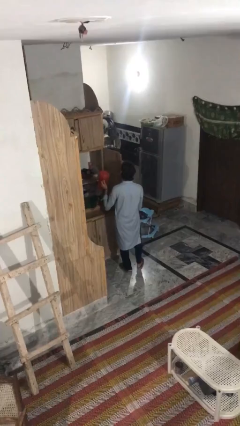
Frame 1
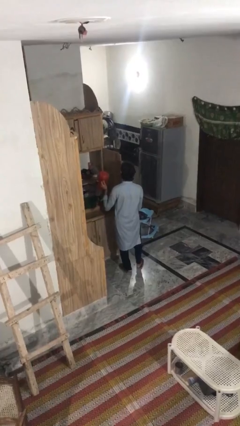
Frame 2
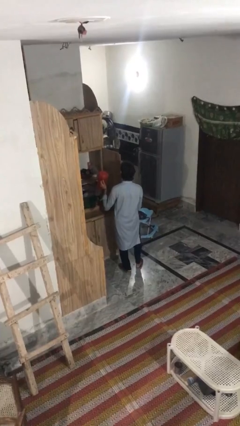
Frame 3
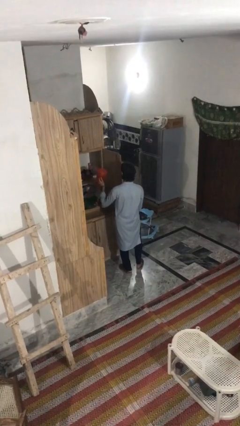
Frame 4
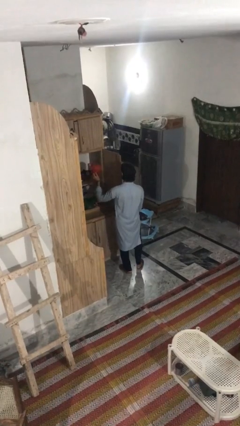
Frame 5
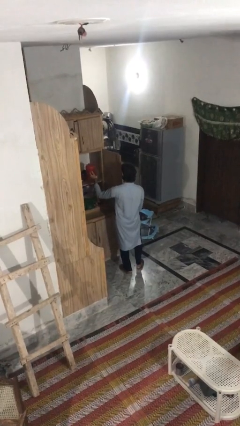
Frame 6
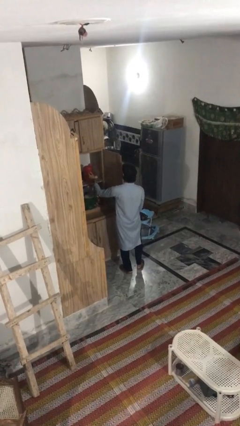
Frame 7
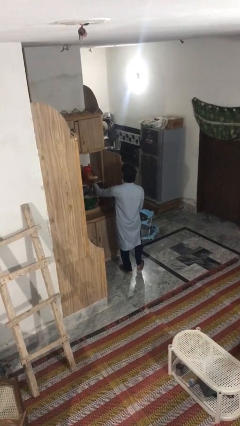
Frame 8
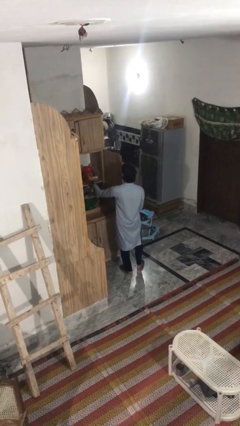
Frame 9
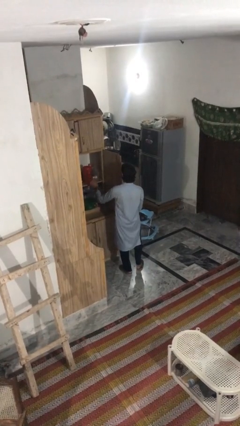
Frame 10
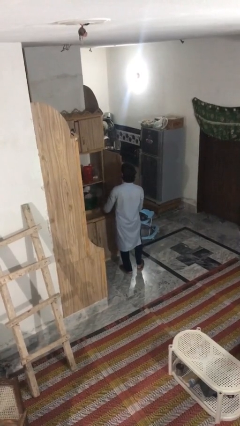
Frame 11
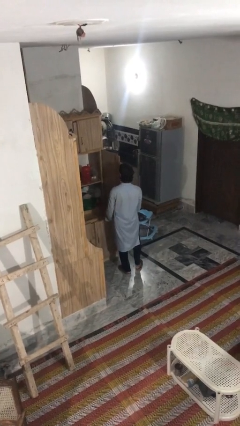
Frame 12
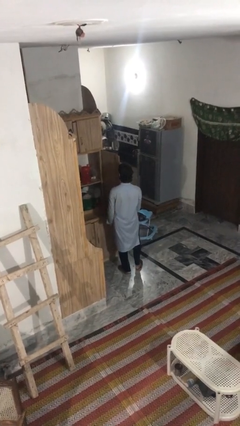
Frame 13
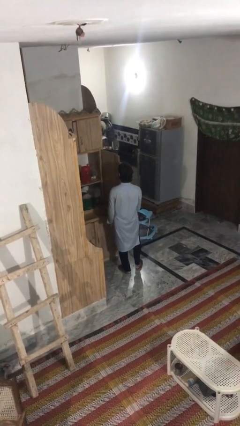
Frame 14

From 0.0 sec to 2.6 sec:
person puts down object into cabinet

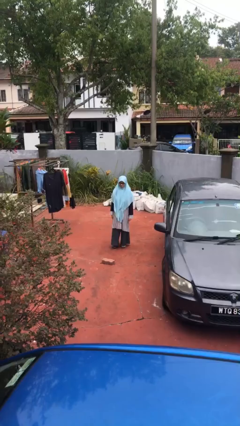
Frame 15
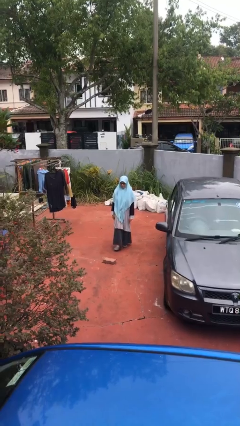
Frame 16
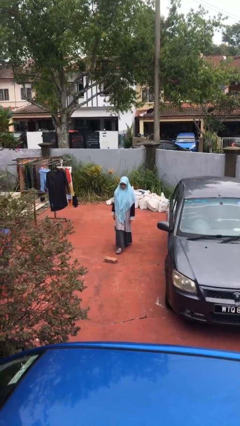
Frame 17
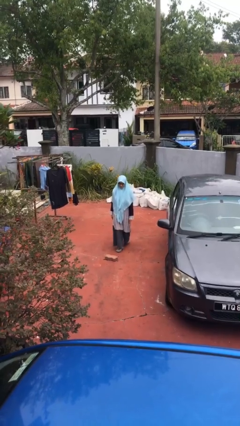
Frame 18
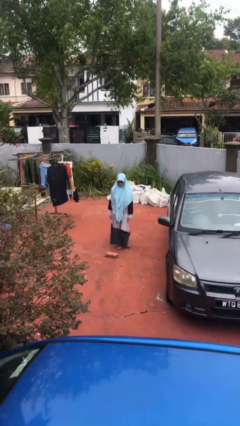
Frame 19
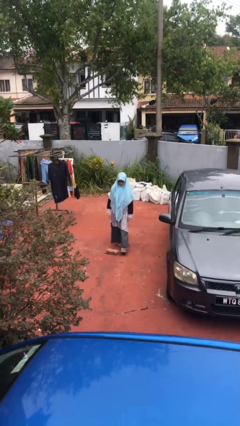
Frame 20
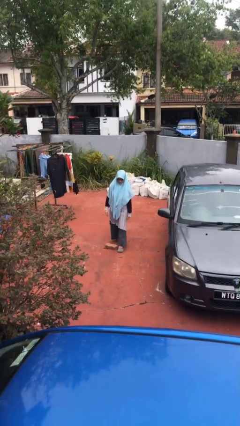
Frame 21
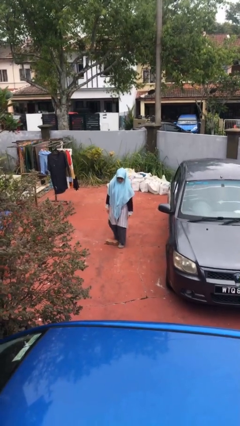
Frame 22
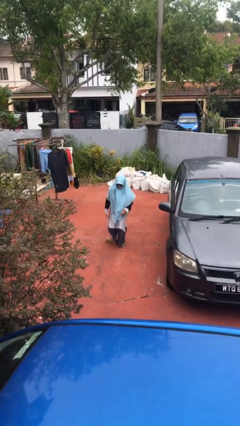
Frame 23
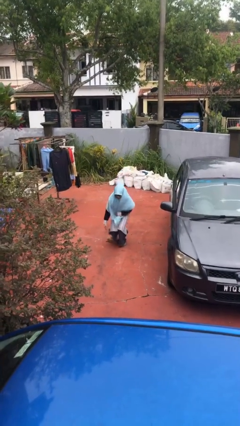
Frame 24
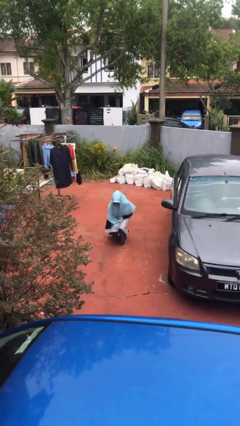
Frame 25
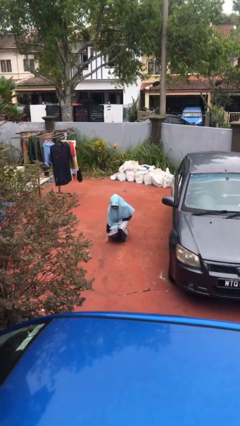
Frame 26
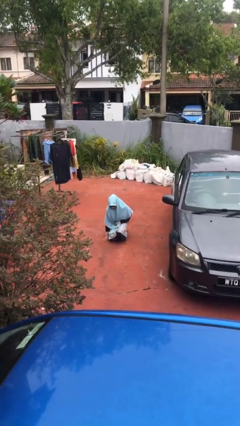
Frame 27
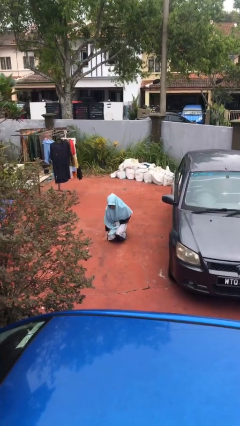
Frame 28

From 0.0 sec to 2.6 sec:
person trips on object on floor

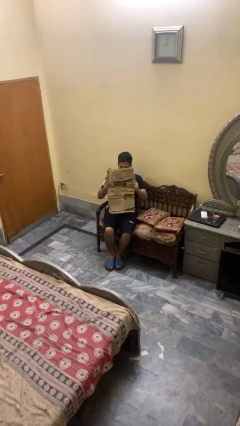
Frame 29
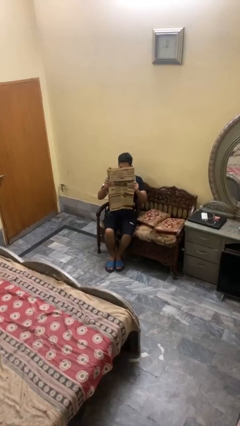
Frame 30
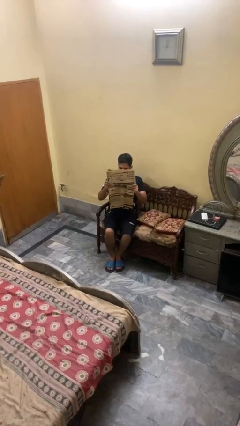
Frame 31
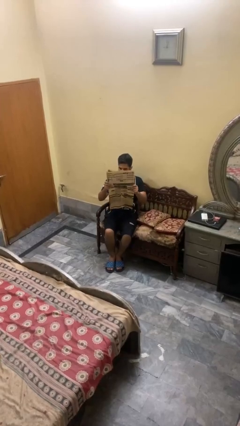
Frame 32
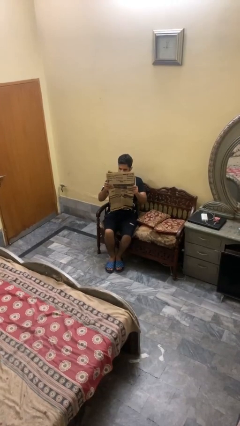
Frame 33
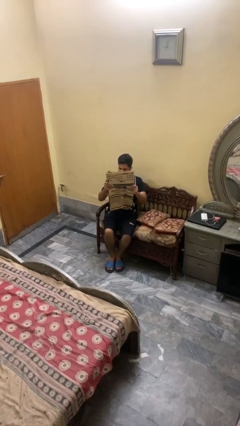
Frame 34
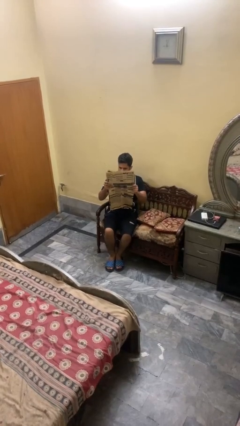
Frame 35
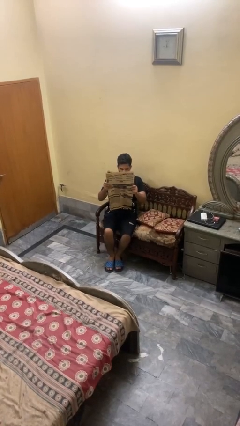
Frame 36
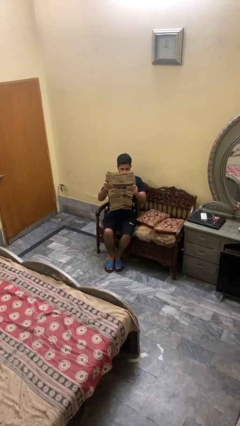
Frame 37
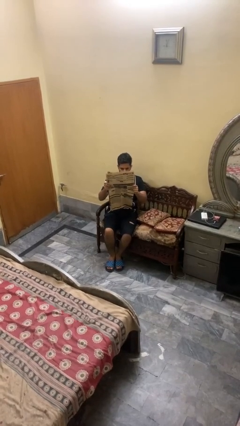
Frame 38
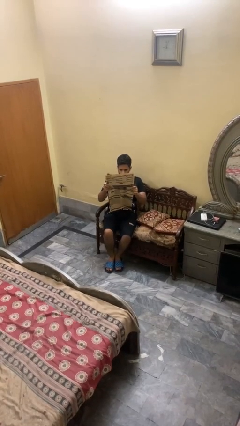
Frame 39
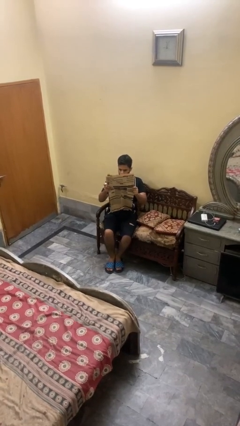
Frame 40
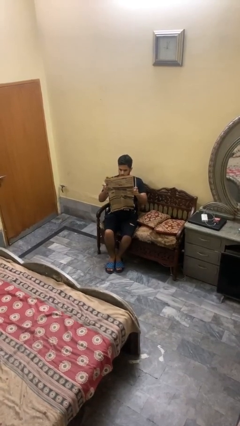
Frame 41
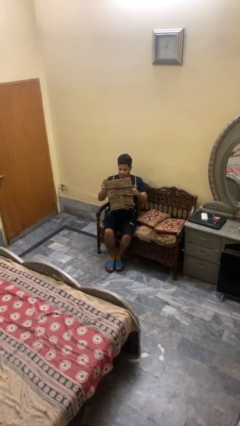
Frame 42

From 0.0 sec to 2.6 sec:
person reads newspaper

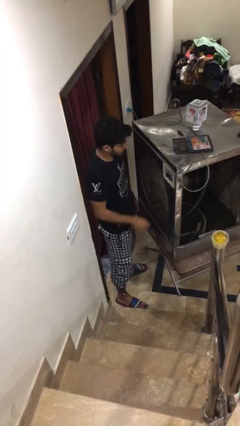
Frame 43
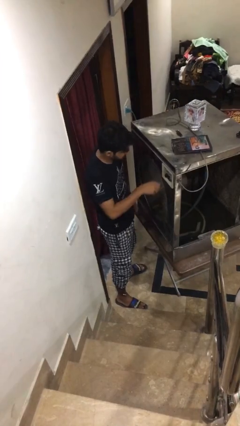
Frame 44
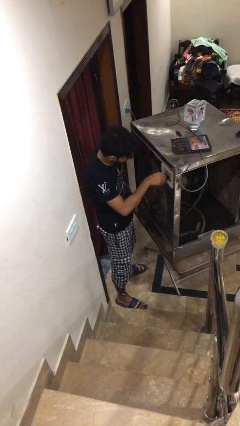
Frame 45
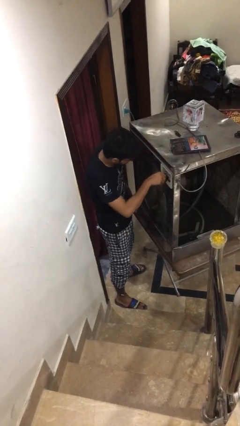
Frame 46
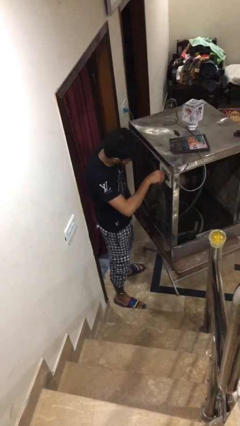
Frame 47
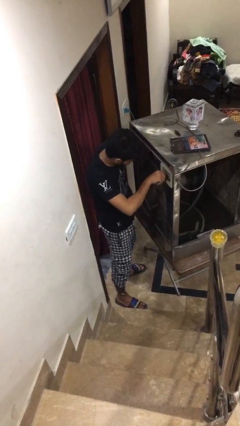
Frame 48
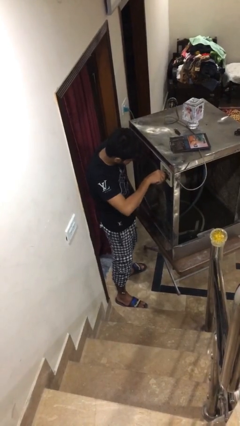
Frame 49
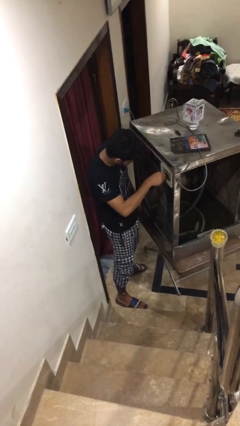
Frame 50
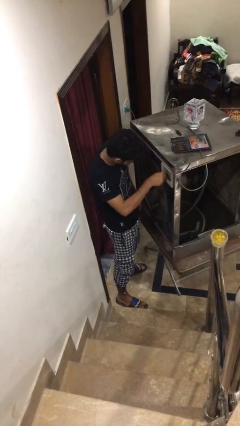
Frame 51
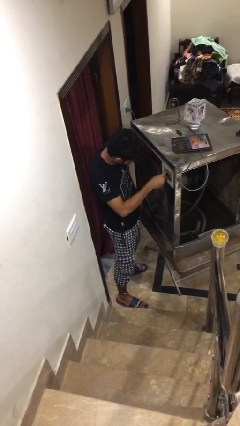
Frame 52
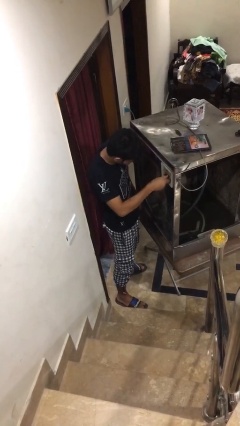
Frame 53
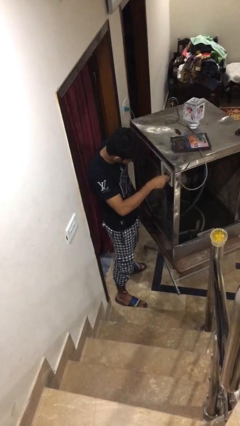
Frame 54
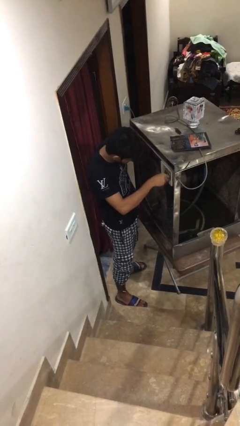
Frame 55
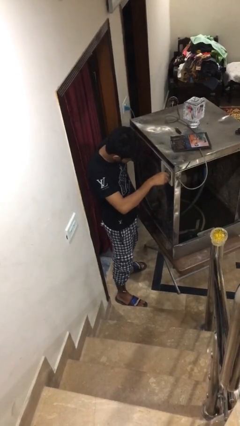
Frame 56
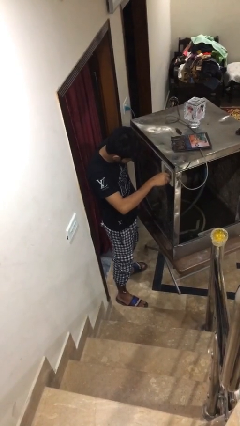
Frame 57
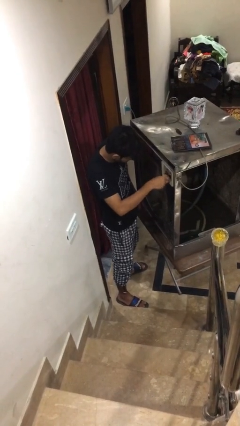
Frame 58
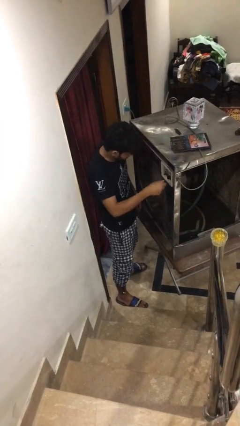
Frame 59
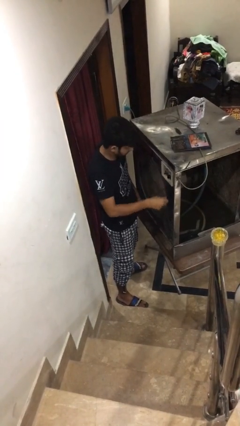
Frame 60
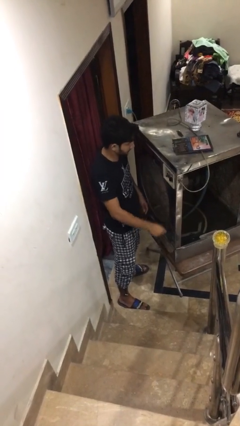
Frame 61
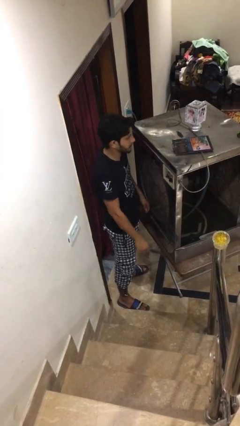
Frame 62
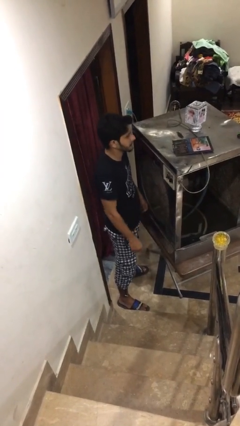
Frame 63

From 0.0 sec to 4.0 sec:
person adjusts thermostat

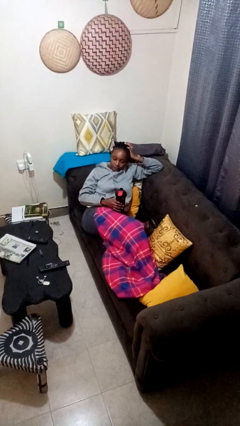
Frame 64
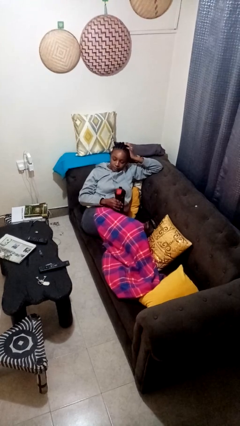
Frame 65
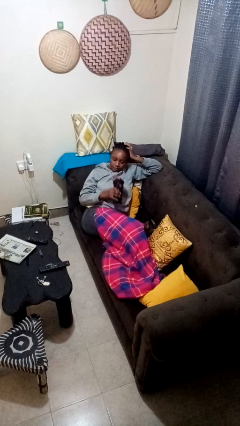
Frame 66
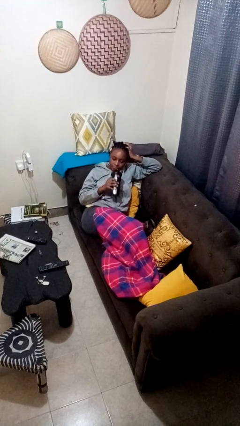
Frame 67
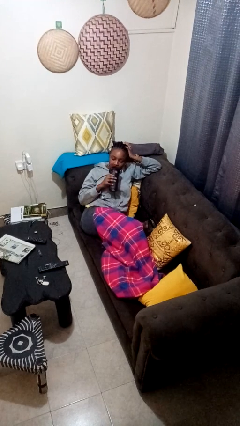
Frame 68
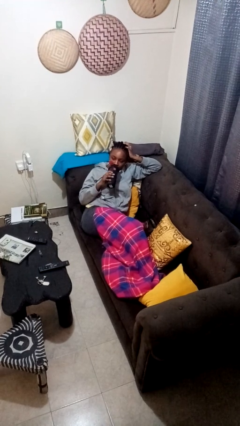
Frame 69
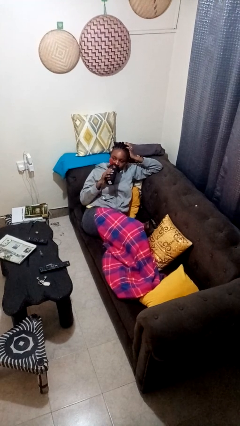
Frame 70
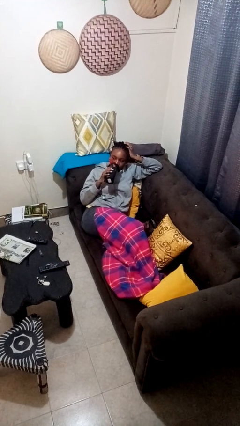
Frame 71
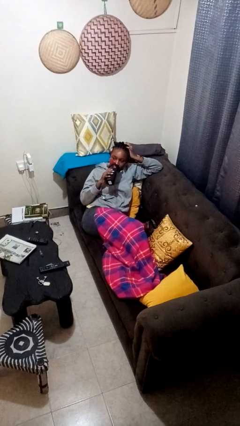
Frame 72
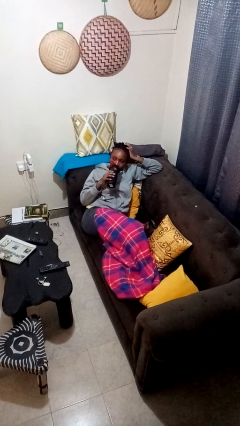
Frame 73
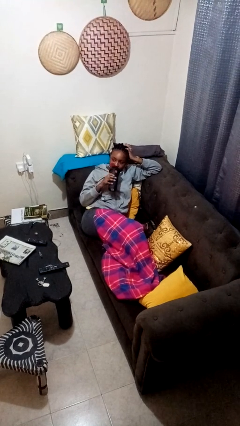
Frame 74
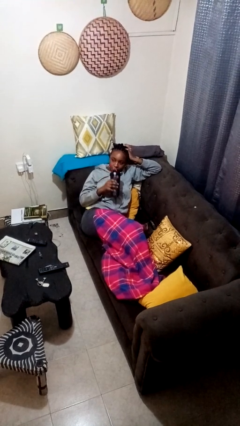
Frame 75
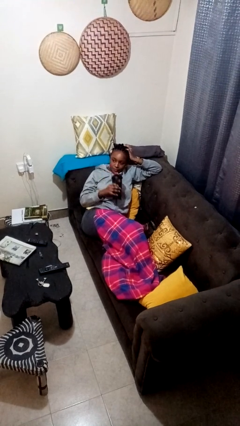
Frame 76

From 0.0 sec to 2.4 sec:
person drinks from bottle

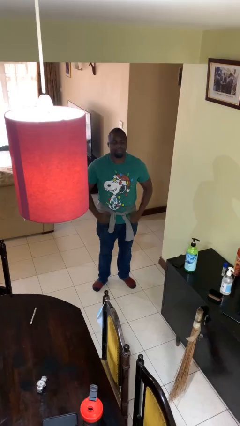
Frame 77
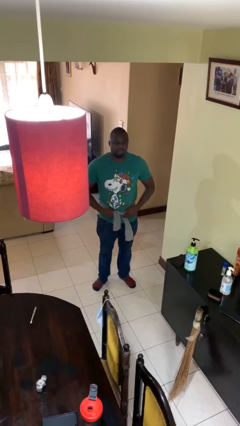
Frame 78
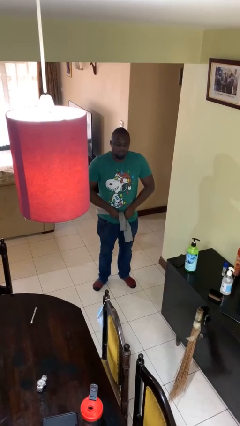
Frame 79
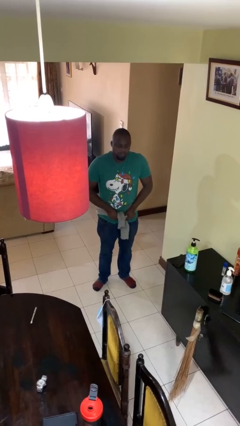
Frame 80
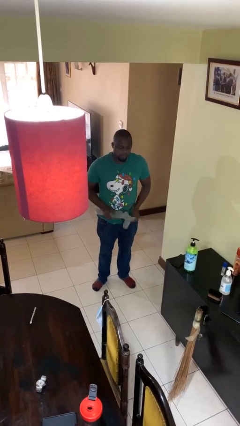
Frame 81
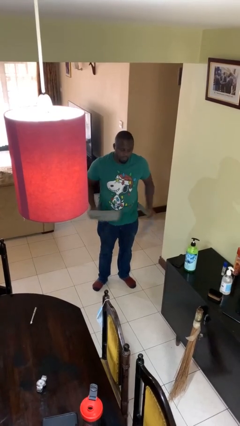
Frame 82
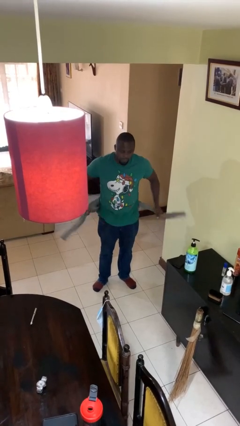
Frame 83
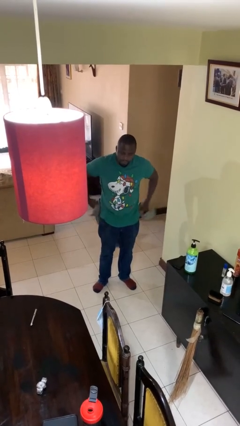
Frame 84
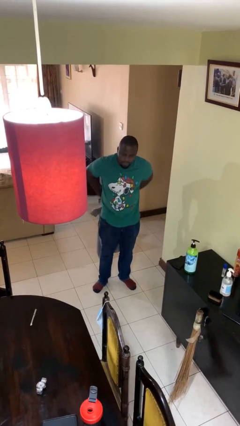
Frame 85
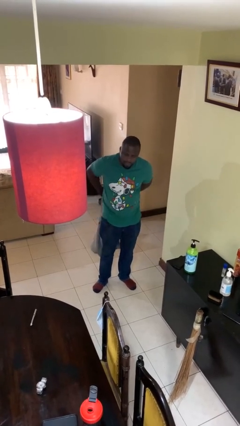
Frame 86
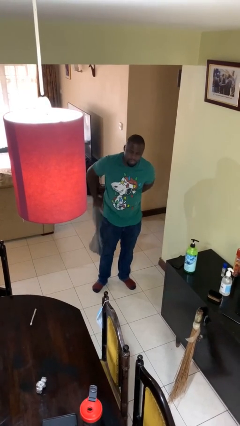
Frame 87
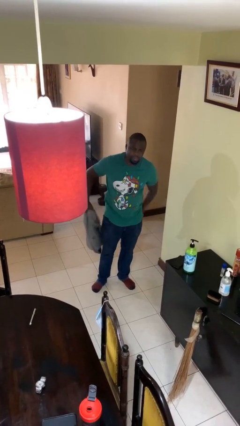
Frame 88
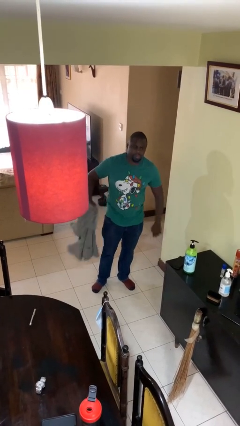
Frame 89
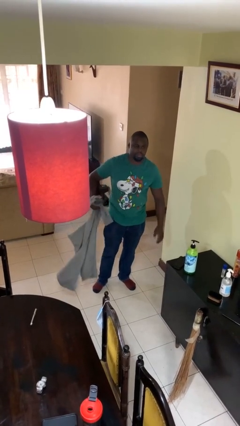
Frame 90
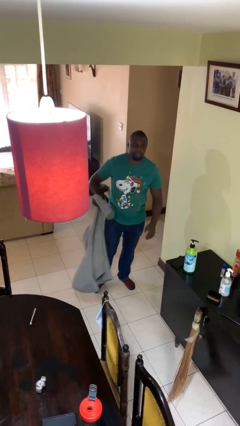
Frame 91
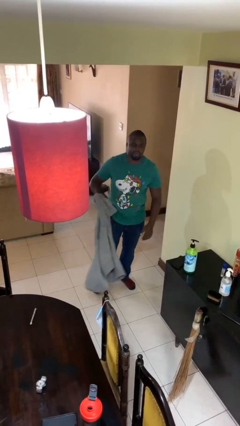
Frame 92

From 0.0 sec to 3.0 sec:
person unties jacket around waist

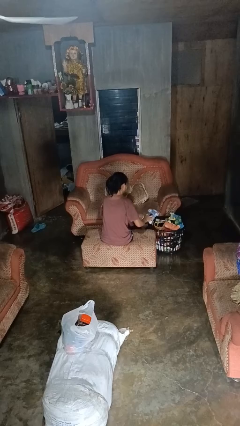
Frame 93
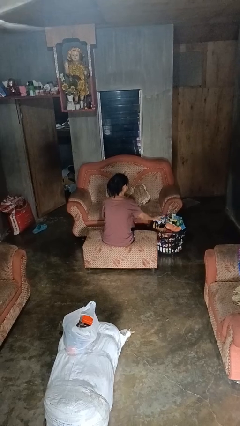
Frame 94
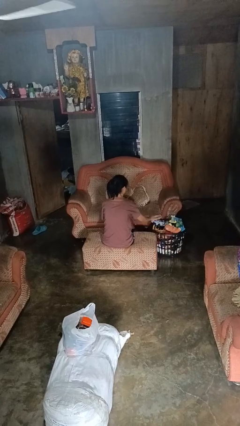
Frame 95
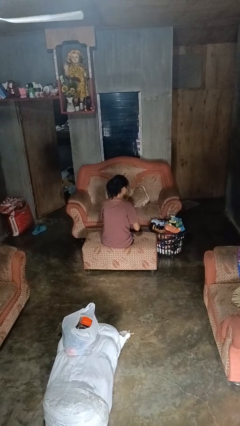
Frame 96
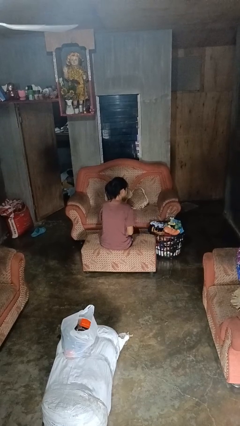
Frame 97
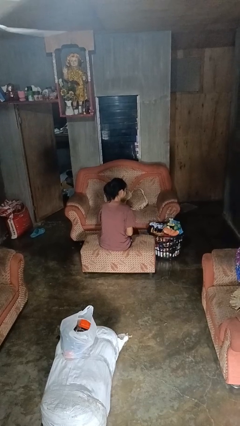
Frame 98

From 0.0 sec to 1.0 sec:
person puts object into basket
